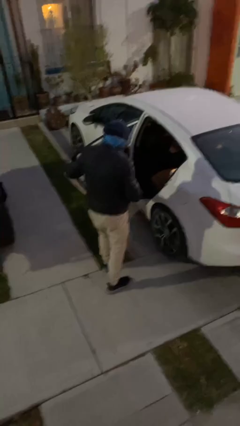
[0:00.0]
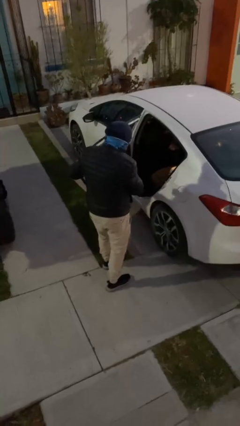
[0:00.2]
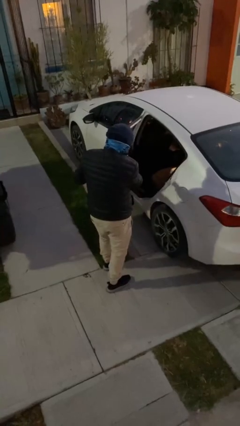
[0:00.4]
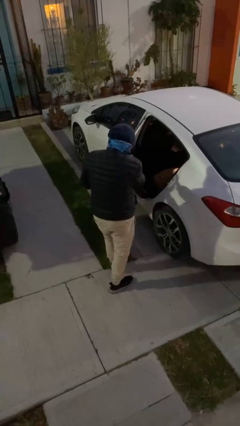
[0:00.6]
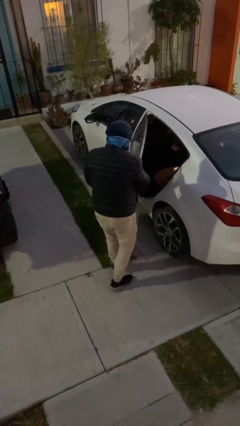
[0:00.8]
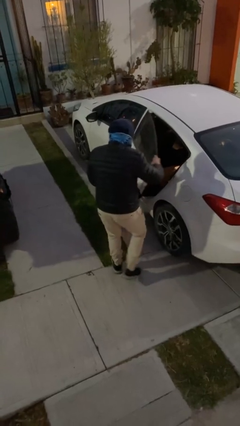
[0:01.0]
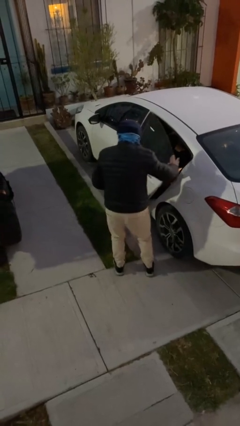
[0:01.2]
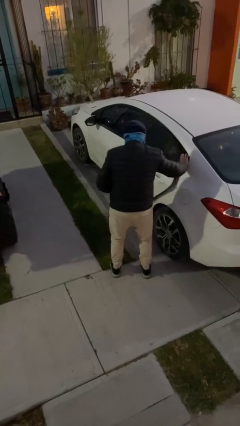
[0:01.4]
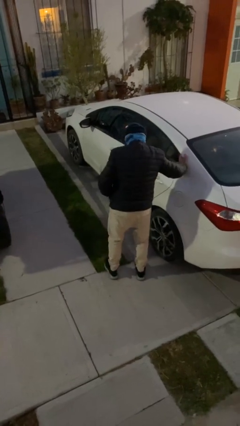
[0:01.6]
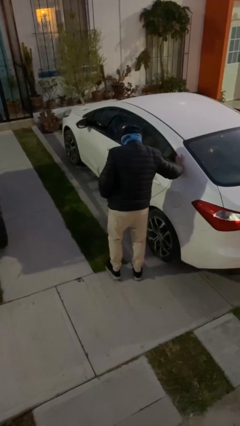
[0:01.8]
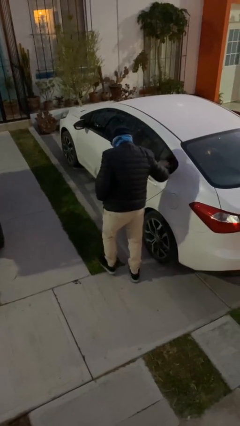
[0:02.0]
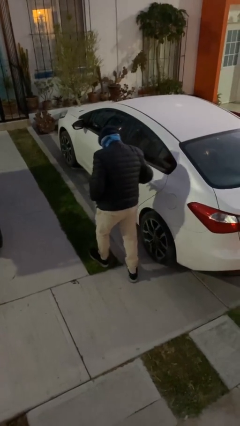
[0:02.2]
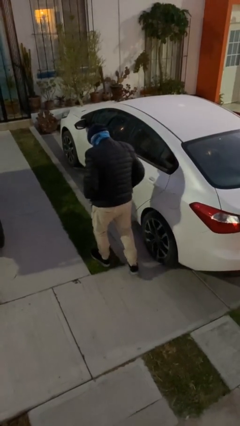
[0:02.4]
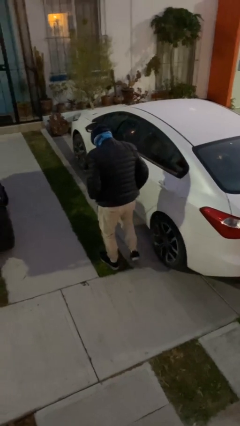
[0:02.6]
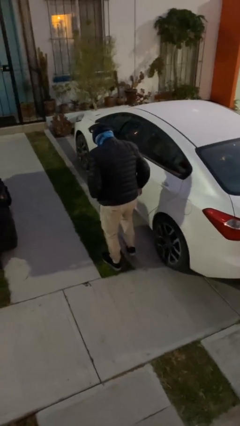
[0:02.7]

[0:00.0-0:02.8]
person closes car door

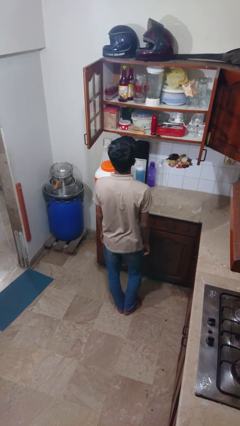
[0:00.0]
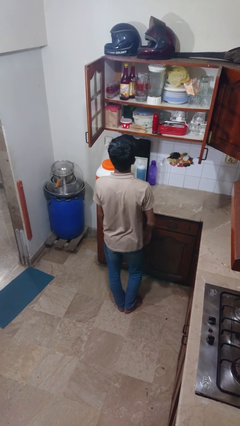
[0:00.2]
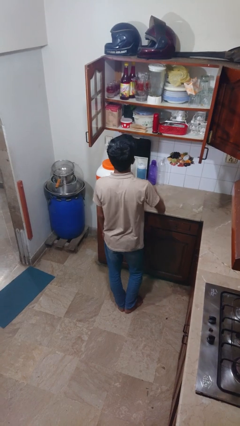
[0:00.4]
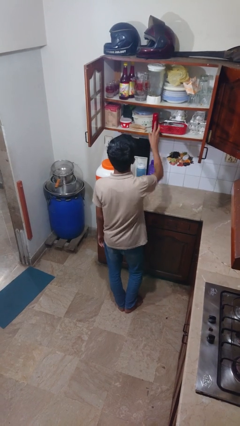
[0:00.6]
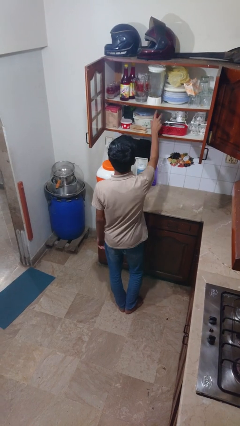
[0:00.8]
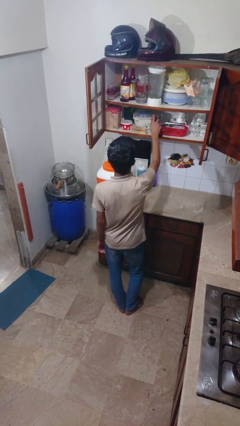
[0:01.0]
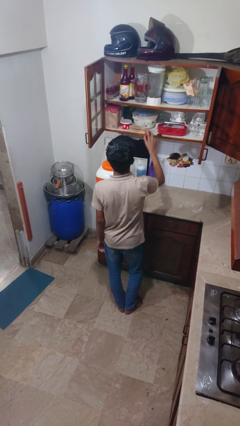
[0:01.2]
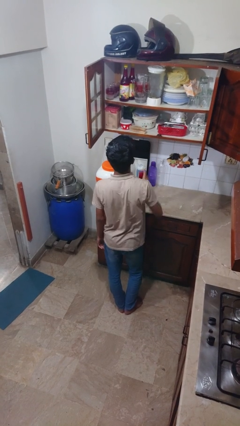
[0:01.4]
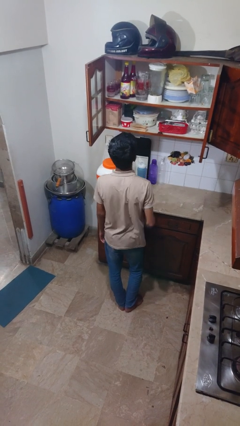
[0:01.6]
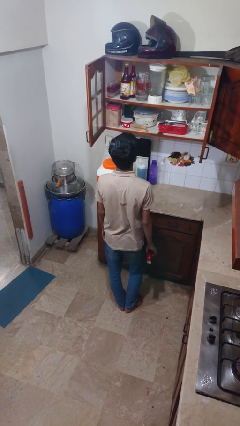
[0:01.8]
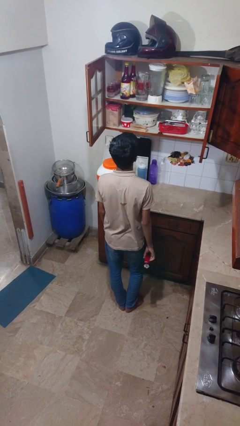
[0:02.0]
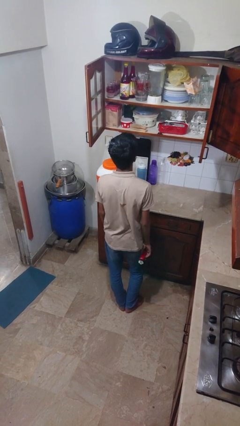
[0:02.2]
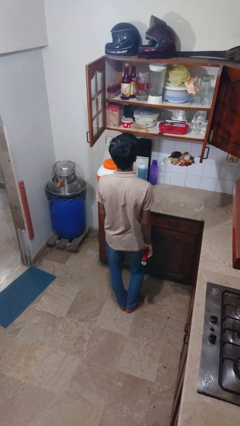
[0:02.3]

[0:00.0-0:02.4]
person picks up object from cabinet

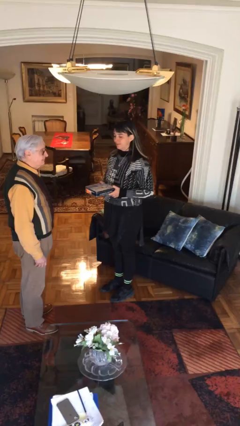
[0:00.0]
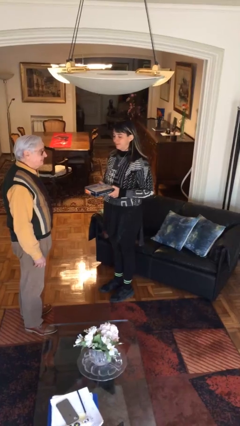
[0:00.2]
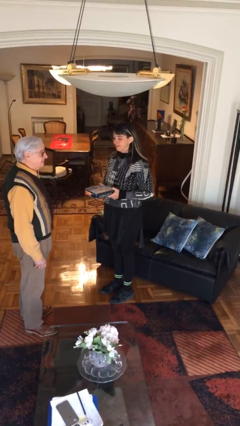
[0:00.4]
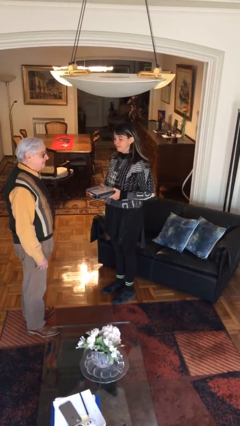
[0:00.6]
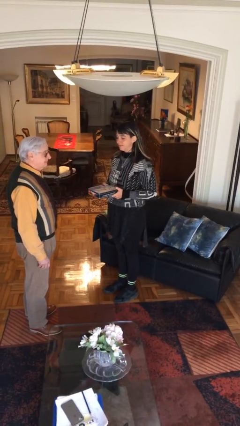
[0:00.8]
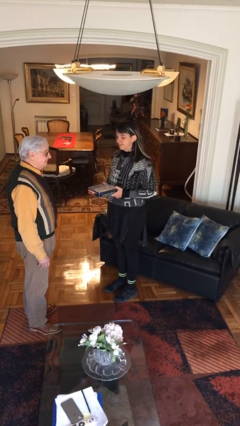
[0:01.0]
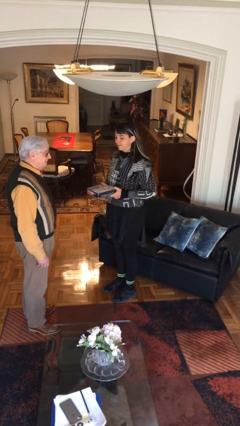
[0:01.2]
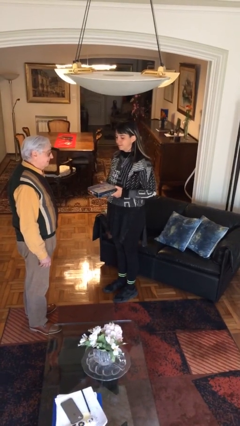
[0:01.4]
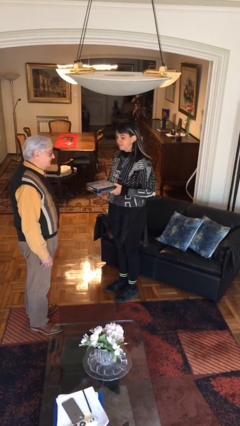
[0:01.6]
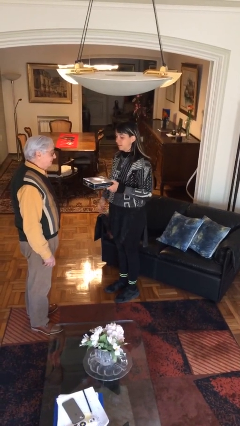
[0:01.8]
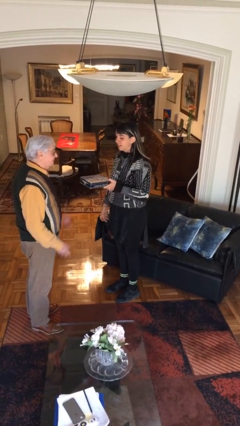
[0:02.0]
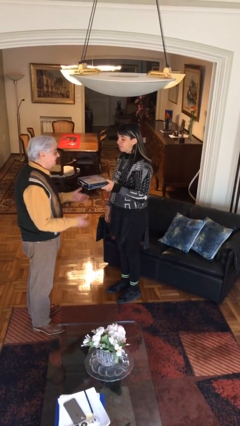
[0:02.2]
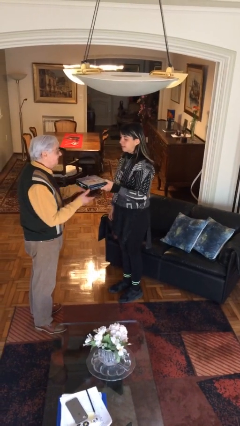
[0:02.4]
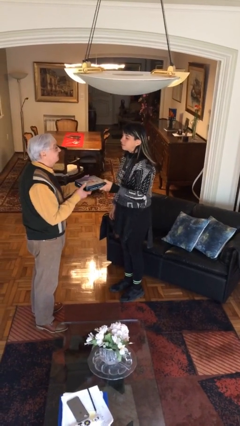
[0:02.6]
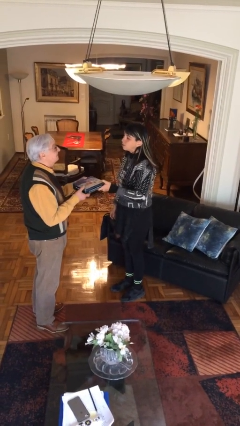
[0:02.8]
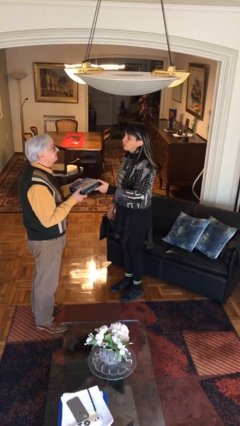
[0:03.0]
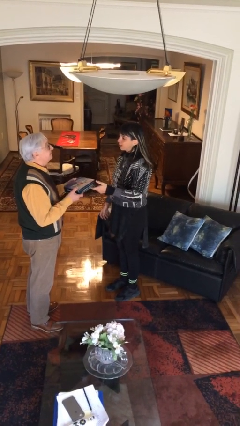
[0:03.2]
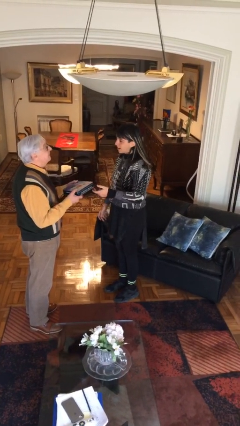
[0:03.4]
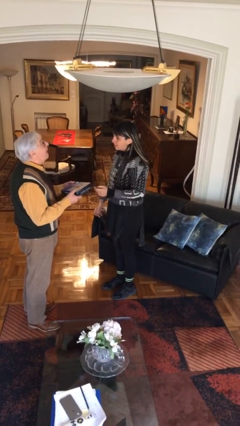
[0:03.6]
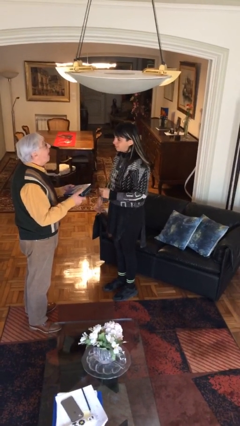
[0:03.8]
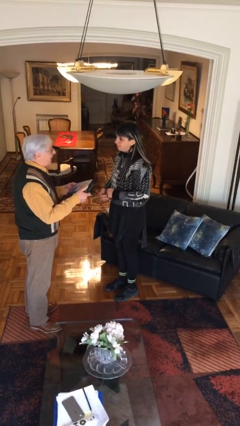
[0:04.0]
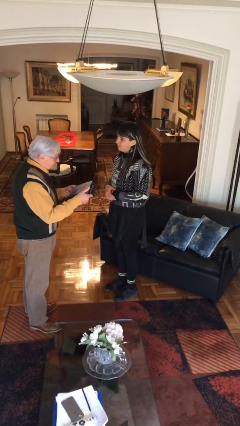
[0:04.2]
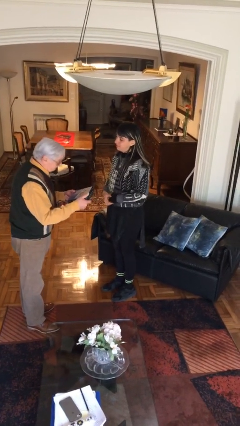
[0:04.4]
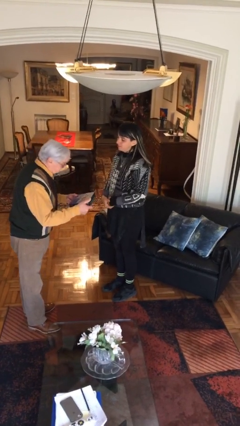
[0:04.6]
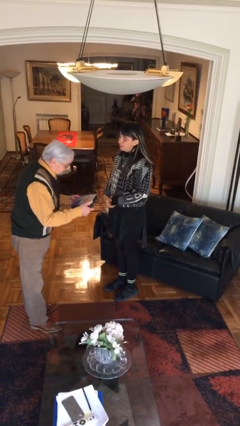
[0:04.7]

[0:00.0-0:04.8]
person transfers object to person

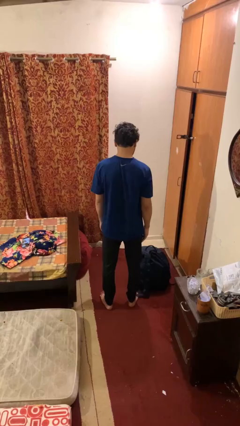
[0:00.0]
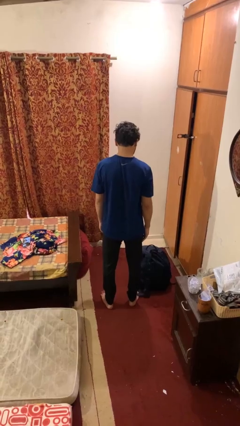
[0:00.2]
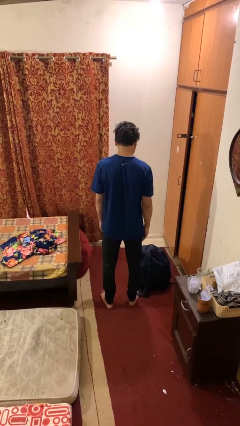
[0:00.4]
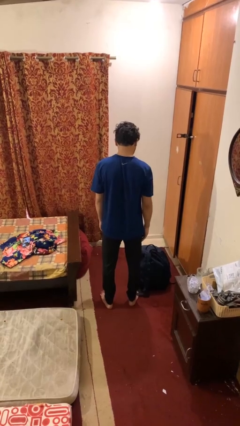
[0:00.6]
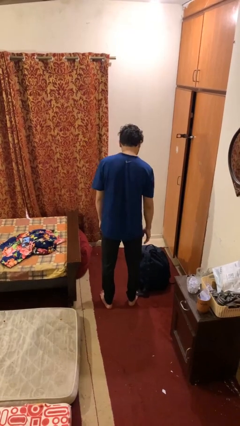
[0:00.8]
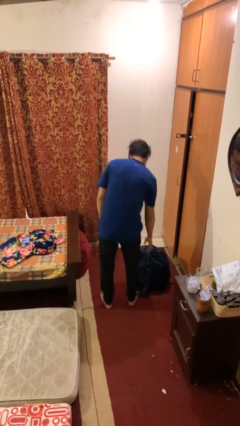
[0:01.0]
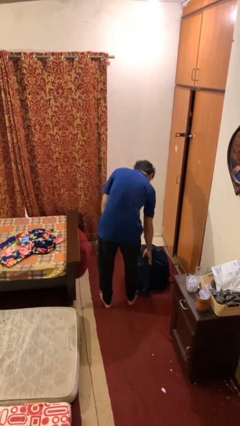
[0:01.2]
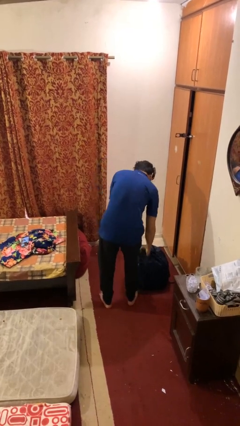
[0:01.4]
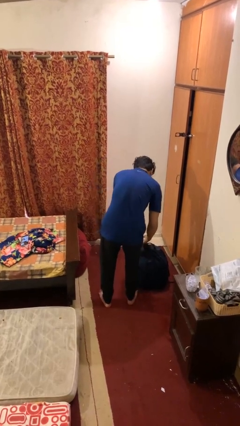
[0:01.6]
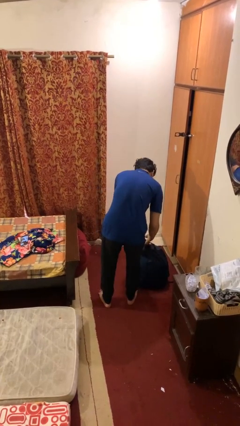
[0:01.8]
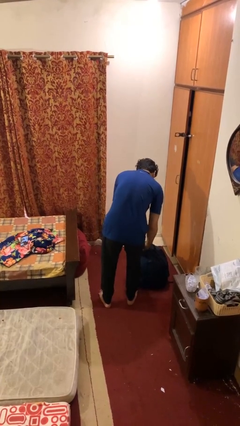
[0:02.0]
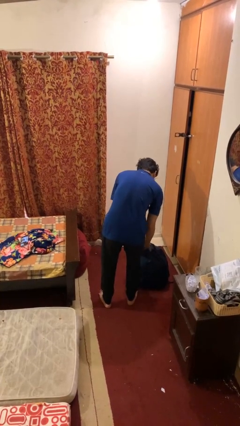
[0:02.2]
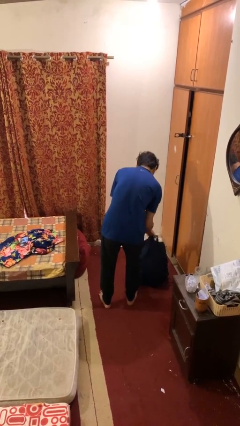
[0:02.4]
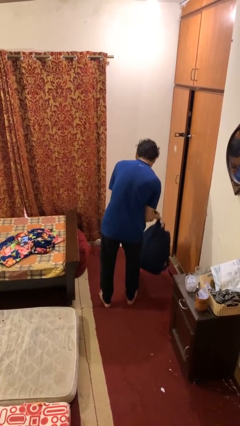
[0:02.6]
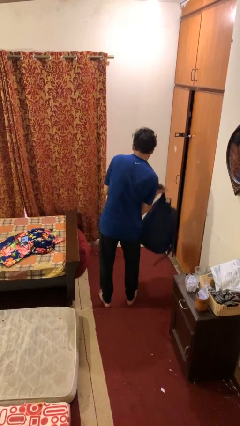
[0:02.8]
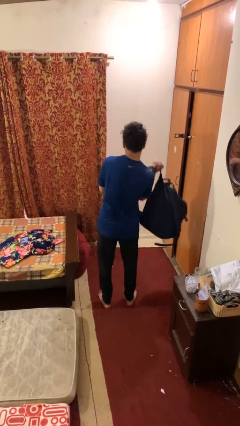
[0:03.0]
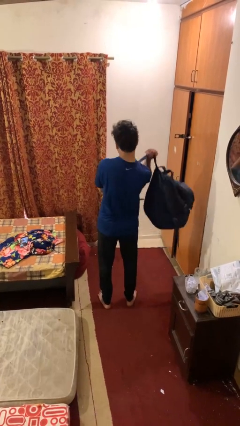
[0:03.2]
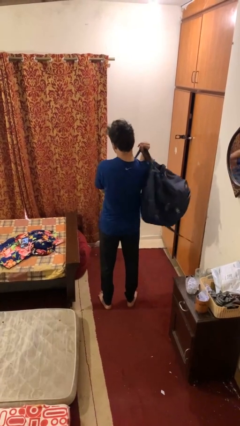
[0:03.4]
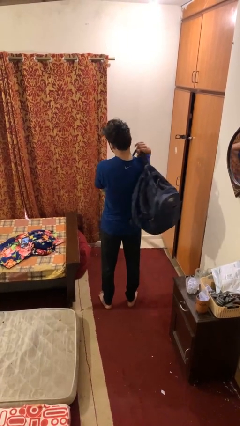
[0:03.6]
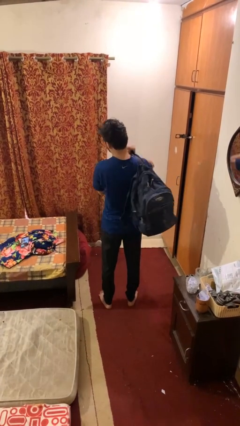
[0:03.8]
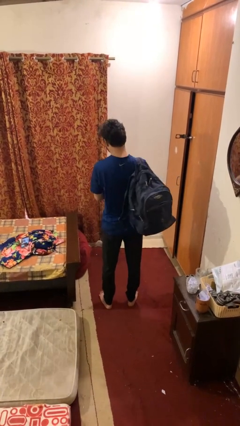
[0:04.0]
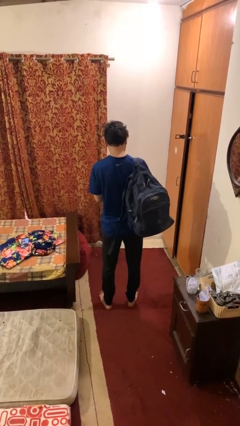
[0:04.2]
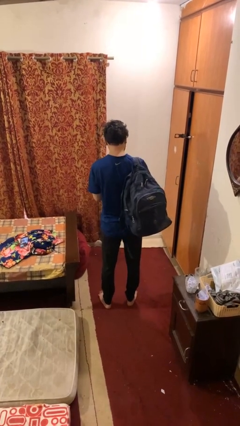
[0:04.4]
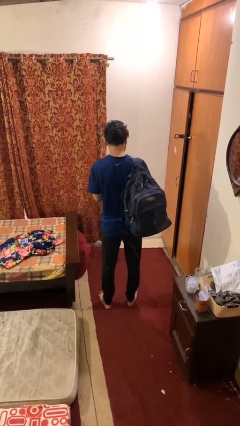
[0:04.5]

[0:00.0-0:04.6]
person puts on backpack

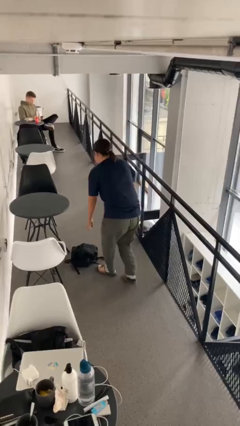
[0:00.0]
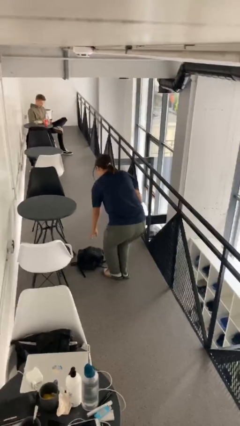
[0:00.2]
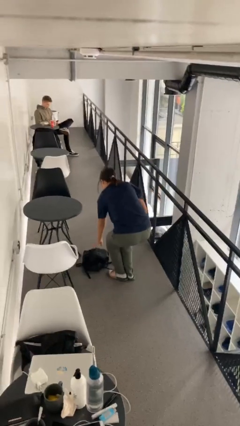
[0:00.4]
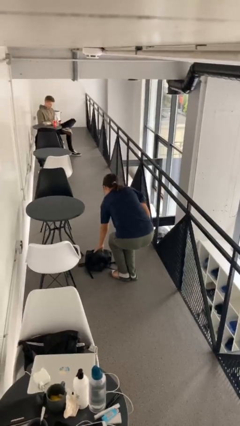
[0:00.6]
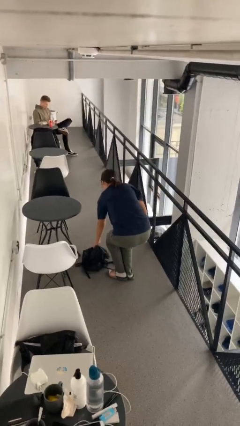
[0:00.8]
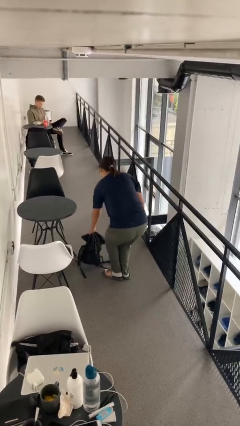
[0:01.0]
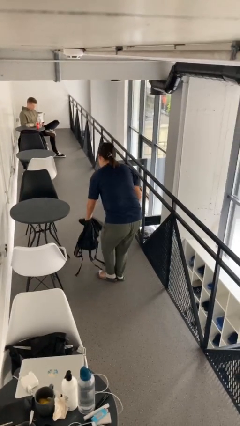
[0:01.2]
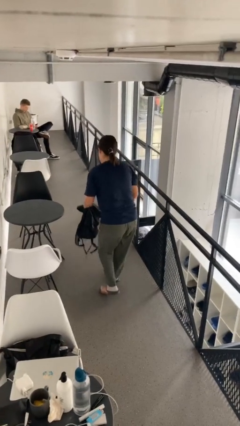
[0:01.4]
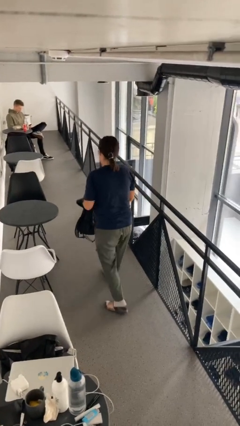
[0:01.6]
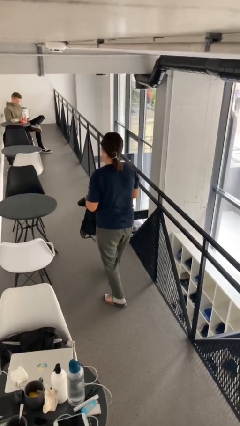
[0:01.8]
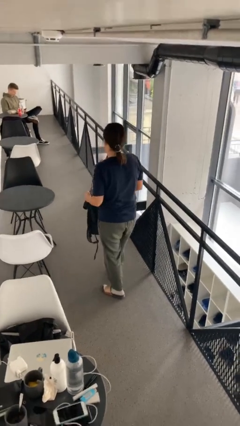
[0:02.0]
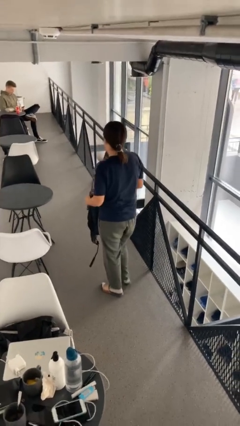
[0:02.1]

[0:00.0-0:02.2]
person picks up object from floor

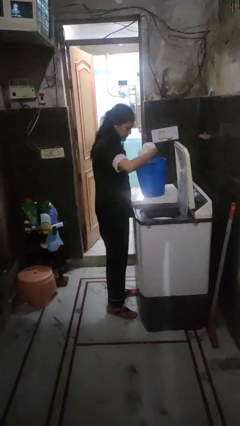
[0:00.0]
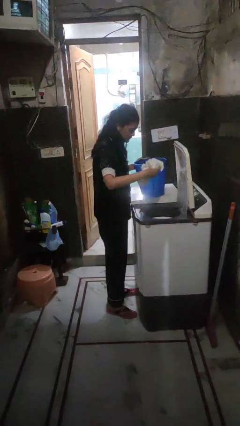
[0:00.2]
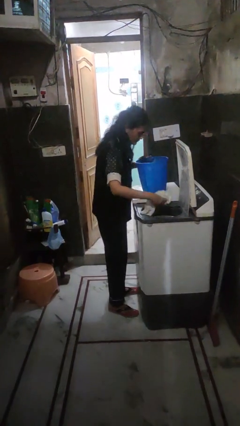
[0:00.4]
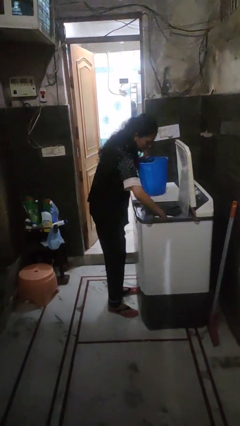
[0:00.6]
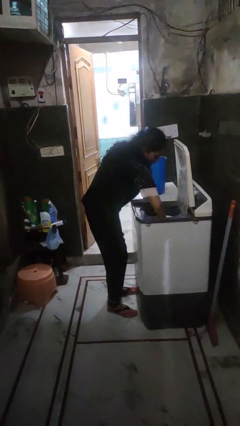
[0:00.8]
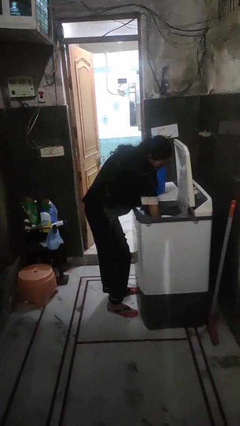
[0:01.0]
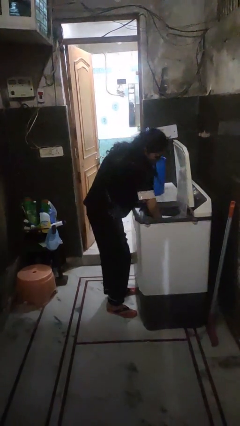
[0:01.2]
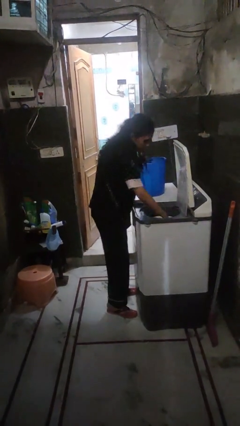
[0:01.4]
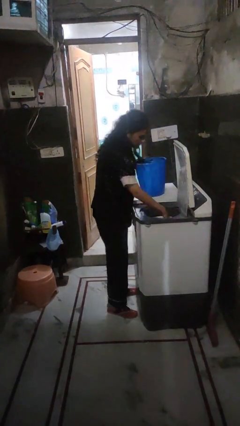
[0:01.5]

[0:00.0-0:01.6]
person loads dryer
